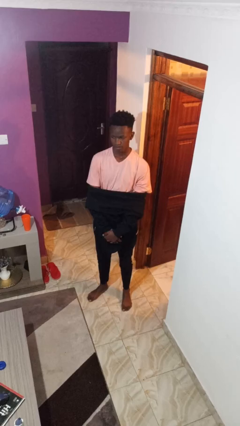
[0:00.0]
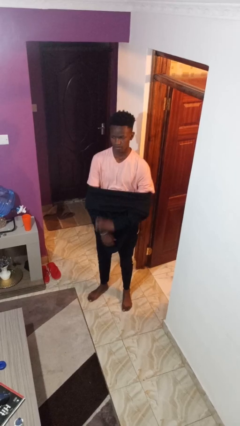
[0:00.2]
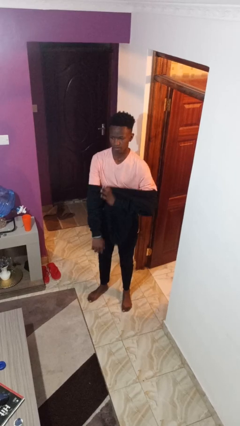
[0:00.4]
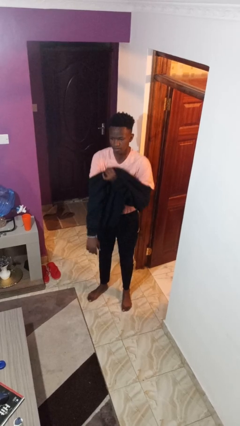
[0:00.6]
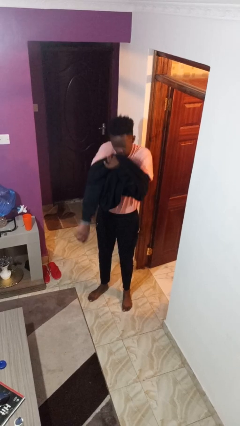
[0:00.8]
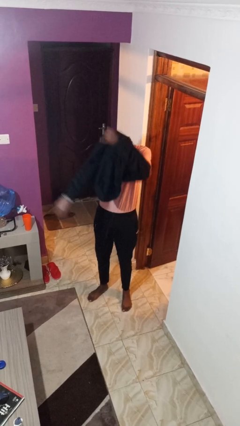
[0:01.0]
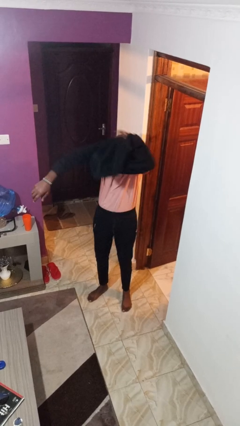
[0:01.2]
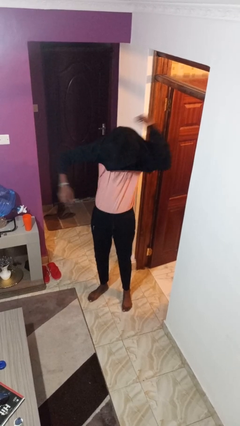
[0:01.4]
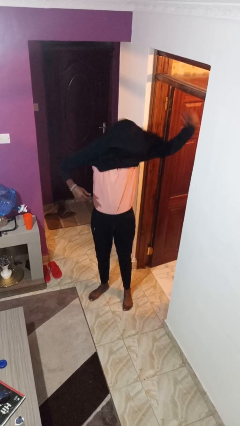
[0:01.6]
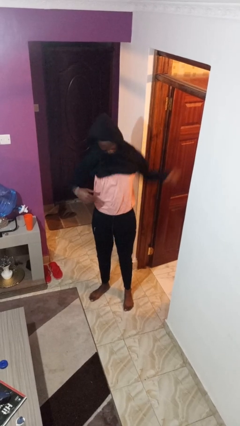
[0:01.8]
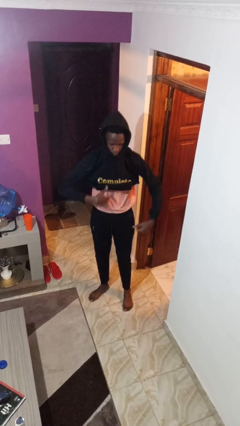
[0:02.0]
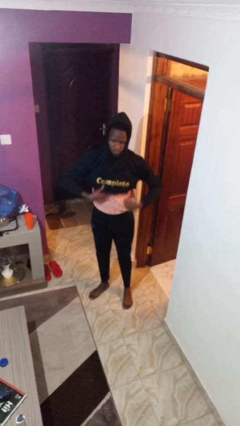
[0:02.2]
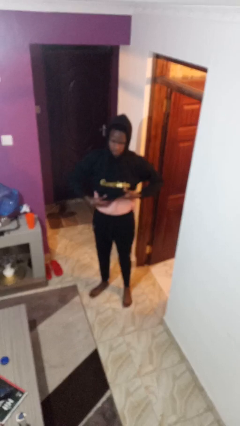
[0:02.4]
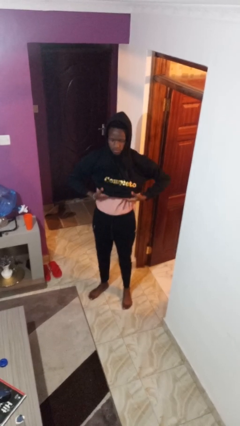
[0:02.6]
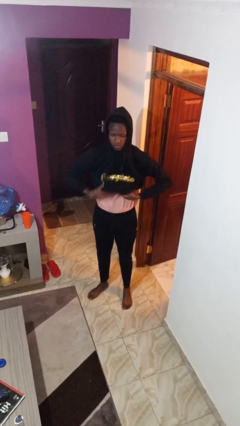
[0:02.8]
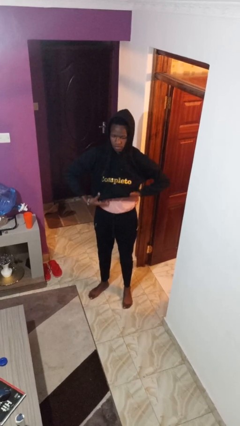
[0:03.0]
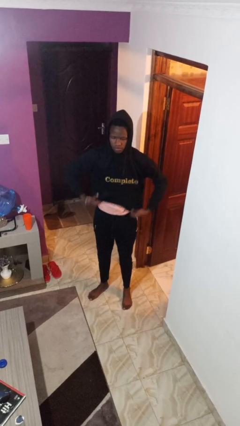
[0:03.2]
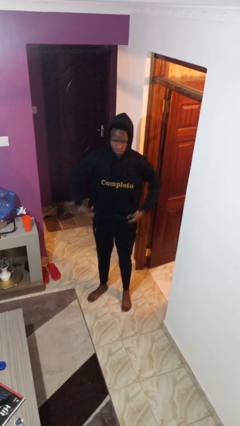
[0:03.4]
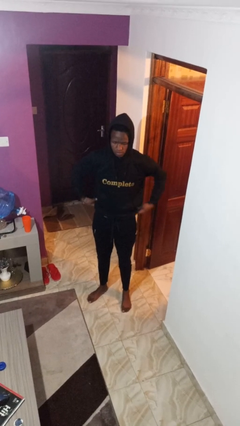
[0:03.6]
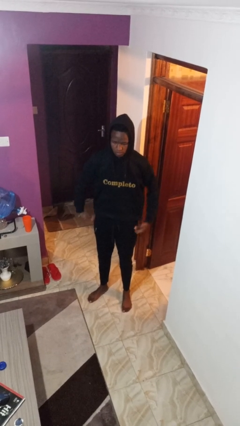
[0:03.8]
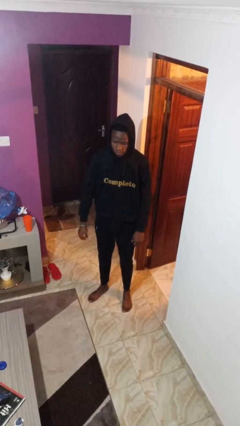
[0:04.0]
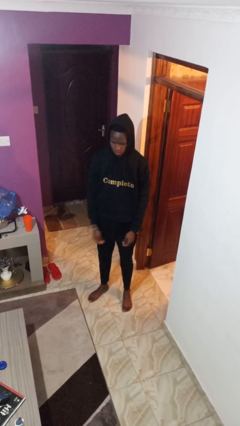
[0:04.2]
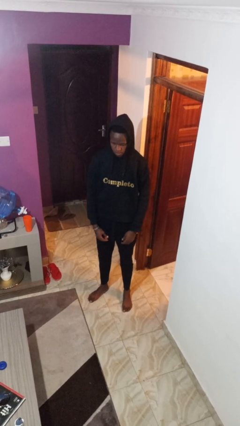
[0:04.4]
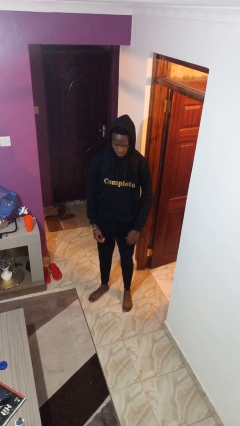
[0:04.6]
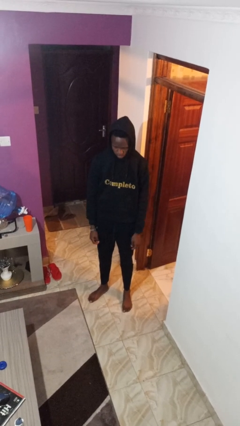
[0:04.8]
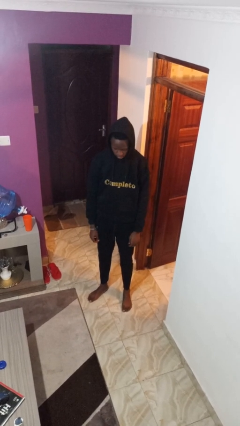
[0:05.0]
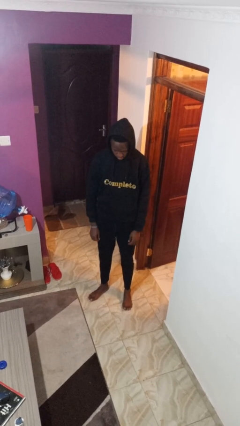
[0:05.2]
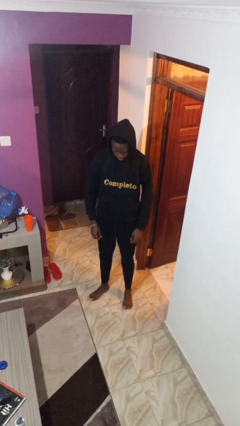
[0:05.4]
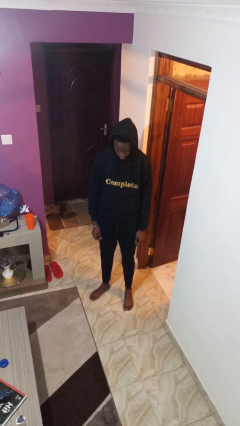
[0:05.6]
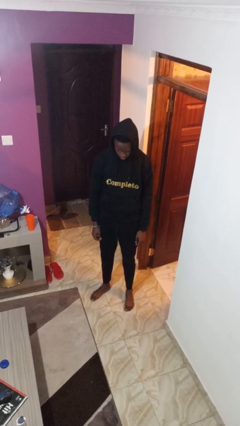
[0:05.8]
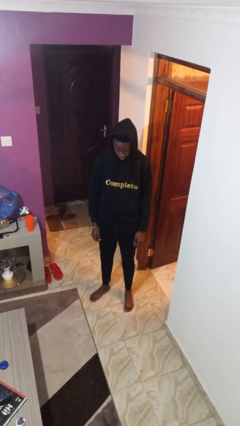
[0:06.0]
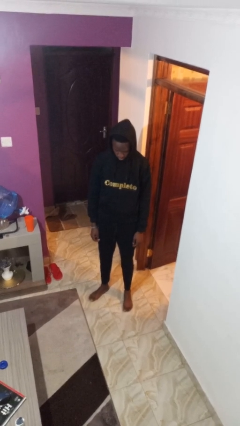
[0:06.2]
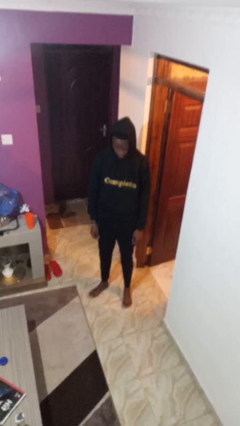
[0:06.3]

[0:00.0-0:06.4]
person puts on hoodie

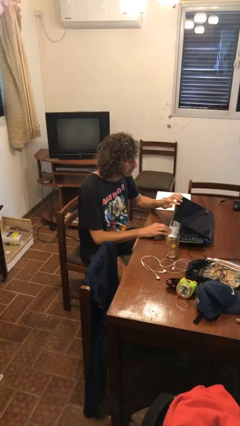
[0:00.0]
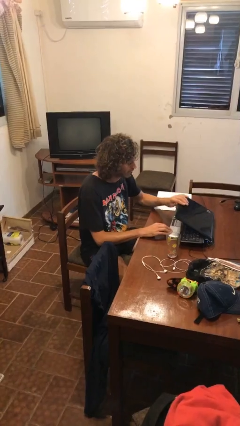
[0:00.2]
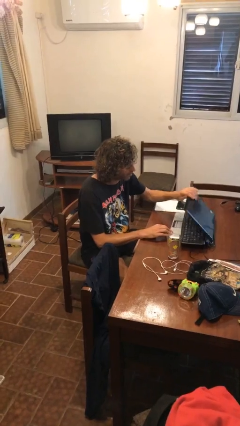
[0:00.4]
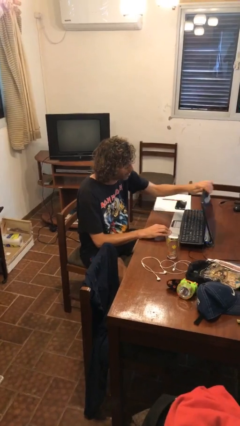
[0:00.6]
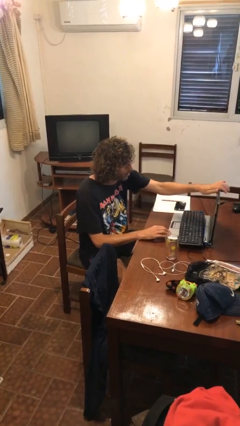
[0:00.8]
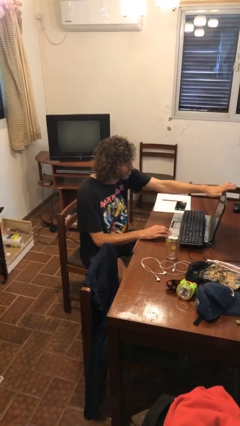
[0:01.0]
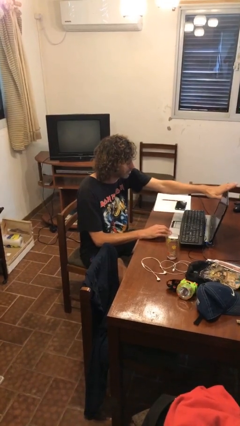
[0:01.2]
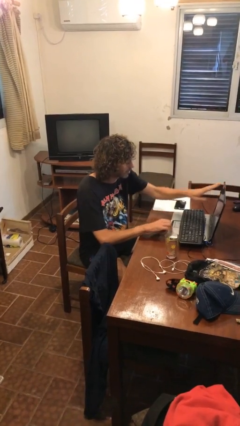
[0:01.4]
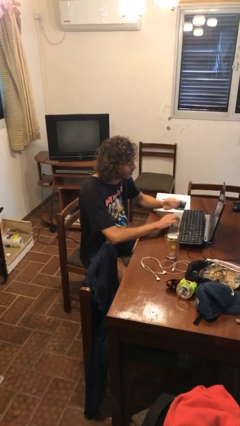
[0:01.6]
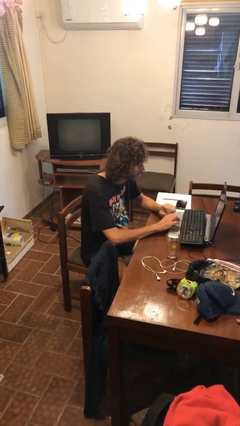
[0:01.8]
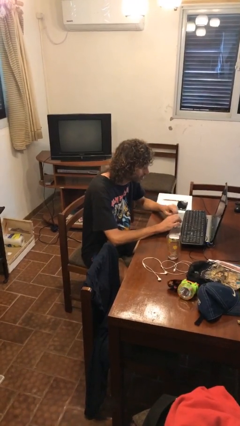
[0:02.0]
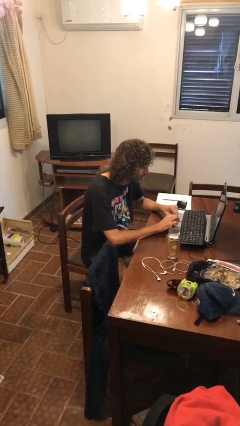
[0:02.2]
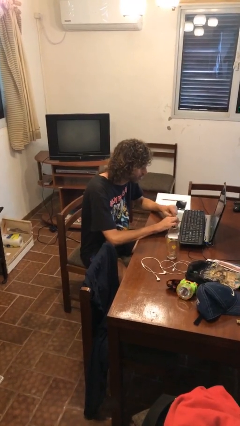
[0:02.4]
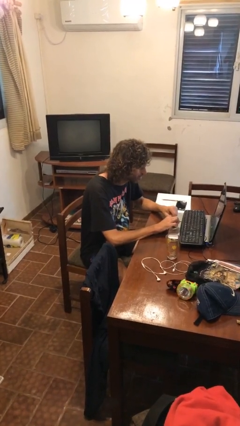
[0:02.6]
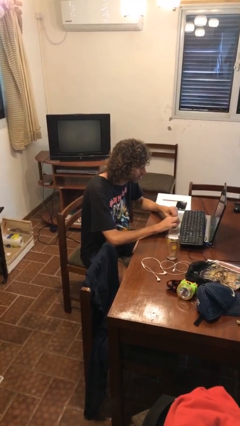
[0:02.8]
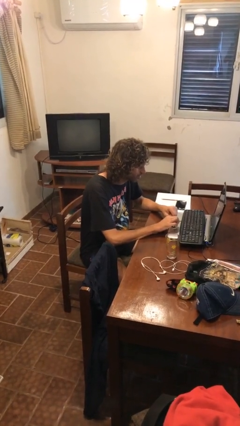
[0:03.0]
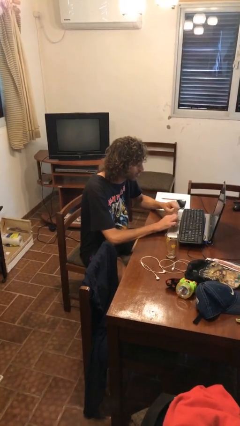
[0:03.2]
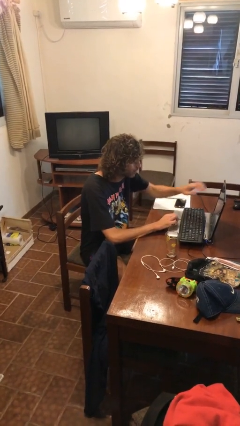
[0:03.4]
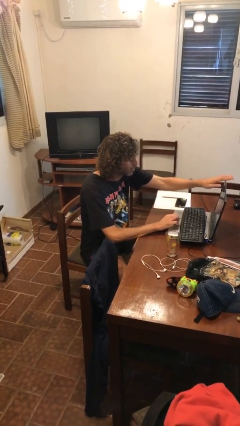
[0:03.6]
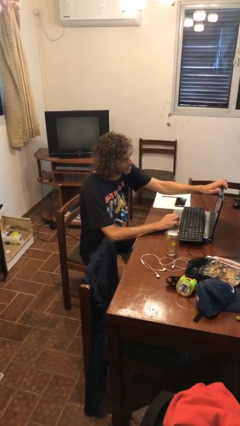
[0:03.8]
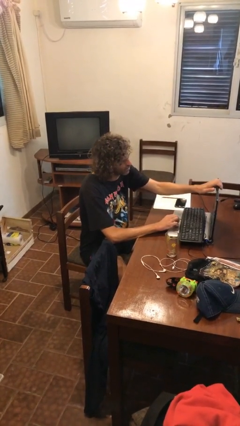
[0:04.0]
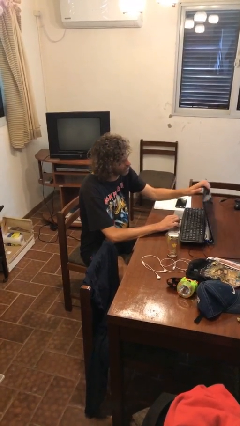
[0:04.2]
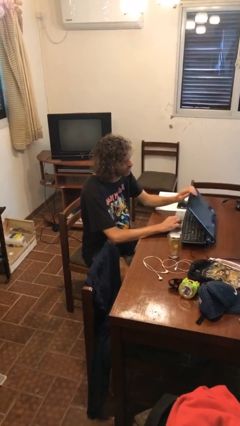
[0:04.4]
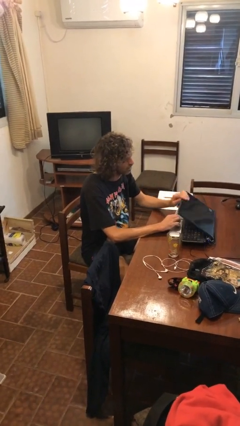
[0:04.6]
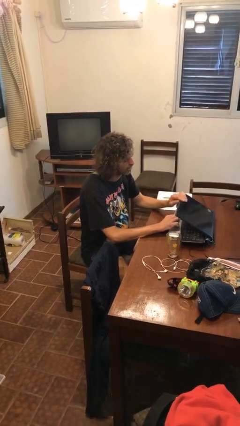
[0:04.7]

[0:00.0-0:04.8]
person interacts with laptop

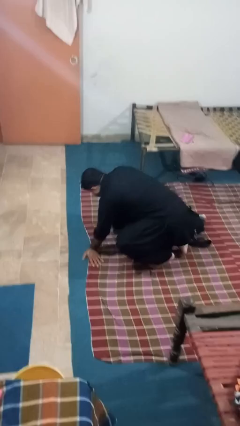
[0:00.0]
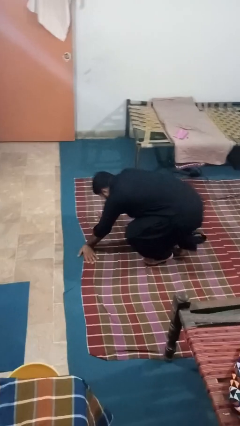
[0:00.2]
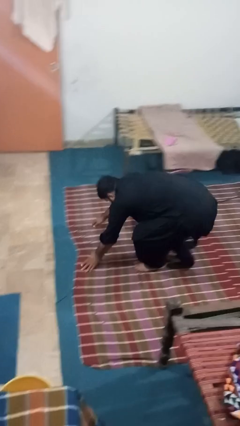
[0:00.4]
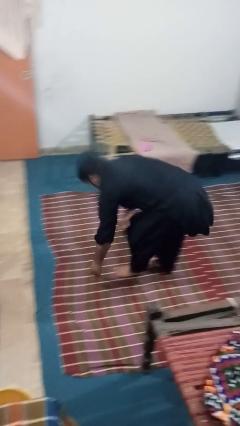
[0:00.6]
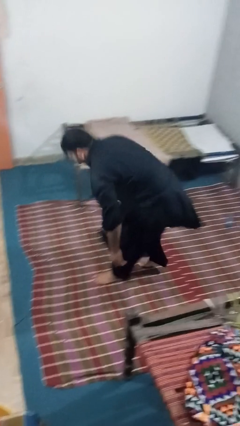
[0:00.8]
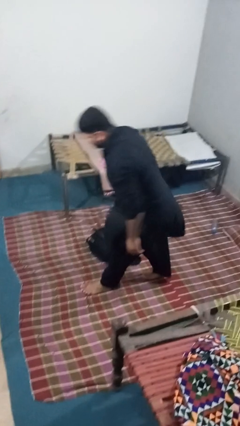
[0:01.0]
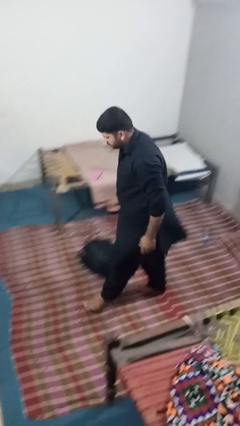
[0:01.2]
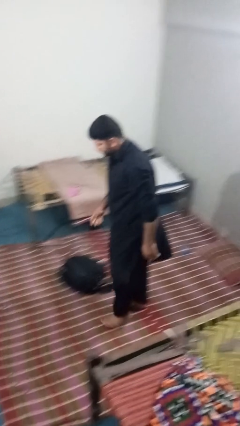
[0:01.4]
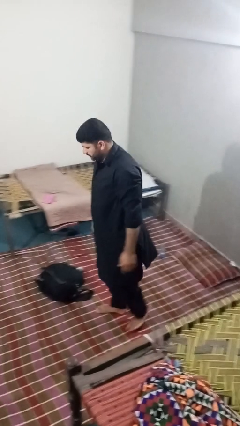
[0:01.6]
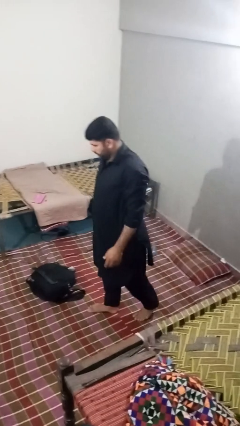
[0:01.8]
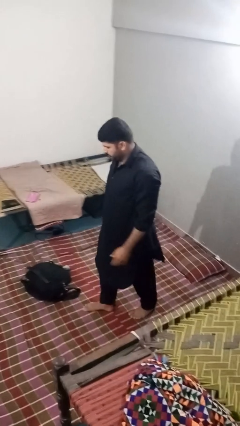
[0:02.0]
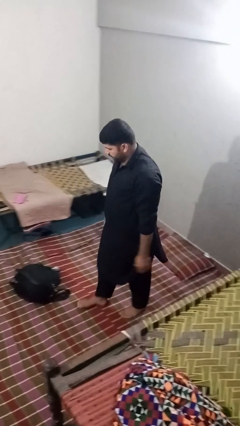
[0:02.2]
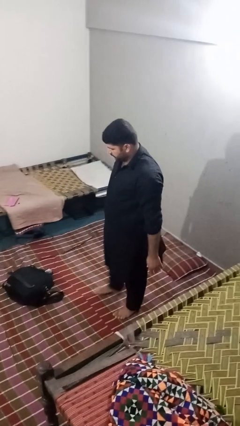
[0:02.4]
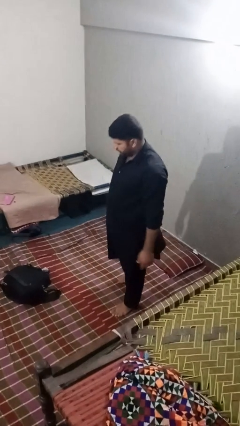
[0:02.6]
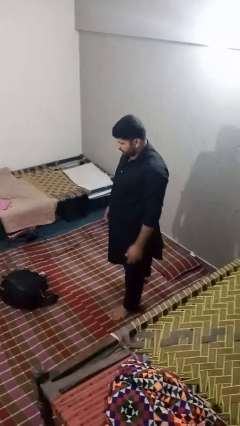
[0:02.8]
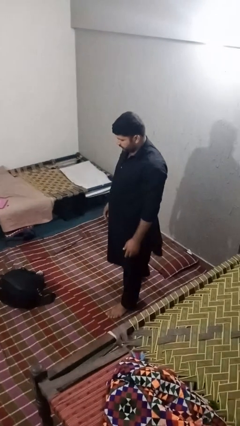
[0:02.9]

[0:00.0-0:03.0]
person stands up from floor

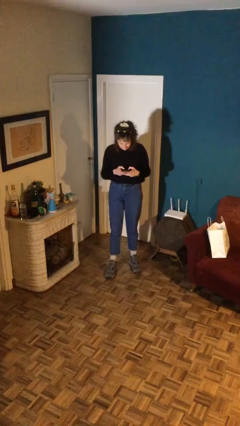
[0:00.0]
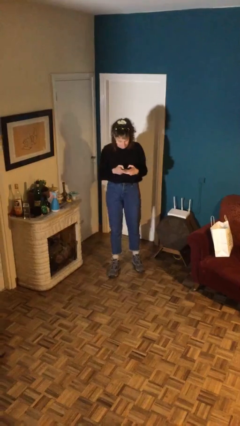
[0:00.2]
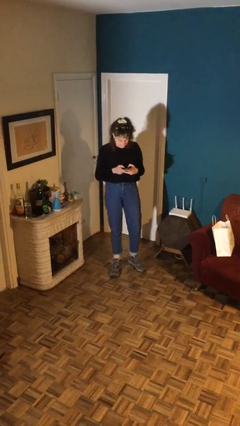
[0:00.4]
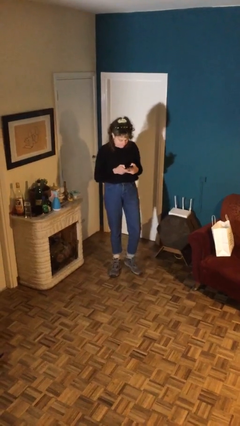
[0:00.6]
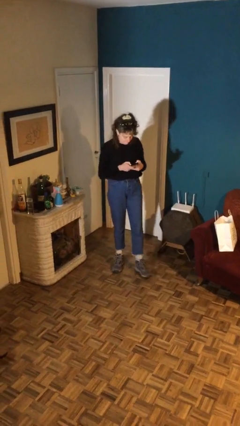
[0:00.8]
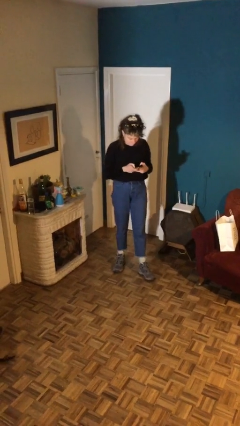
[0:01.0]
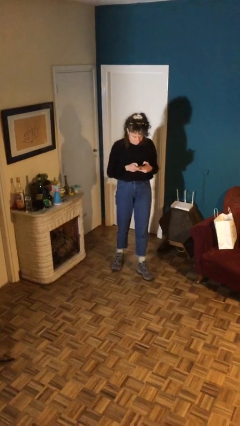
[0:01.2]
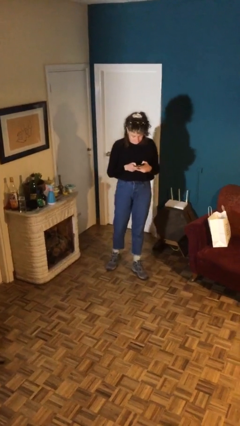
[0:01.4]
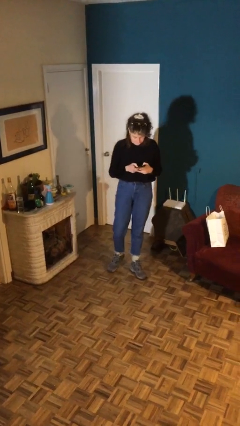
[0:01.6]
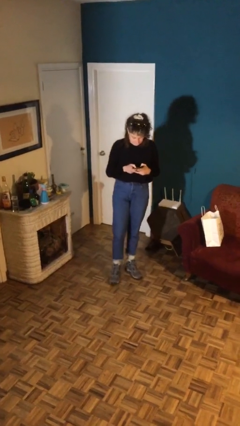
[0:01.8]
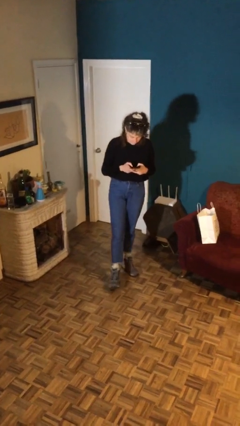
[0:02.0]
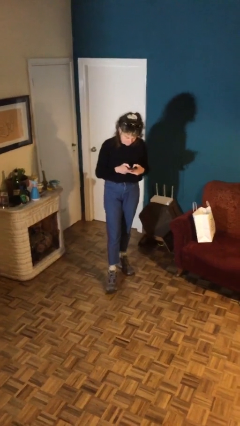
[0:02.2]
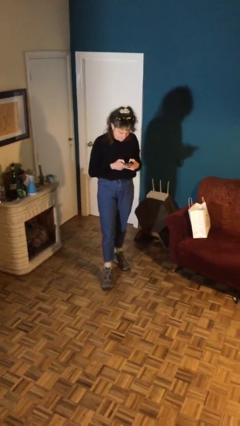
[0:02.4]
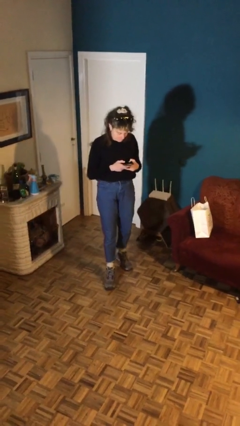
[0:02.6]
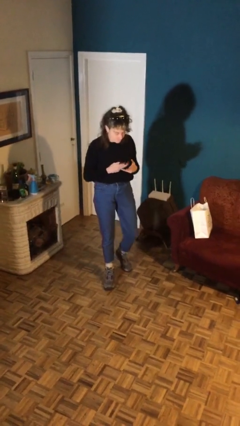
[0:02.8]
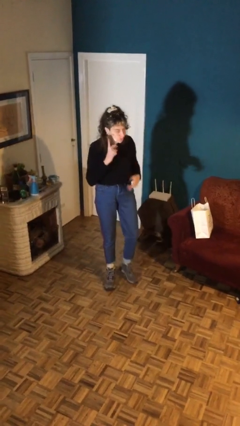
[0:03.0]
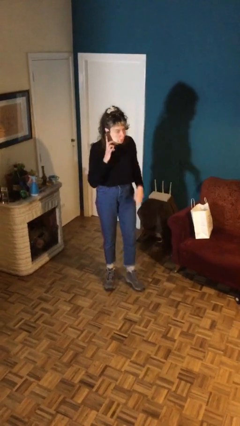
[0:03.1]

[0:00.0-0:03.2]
person texts on phone

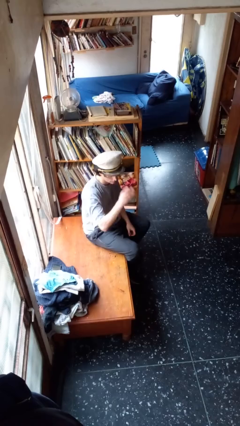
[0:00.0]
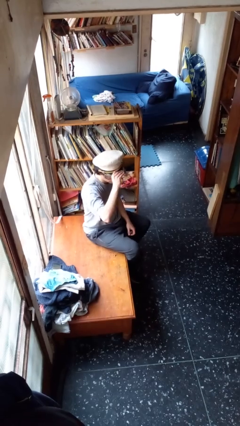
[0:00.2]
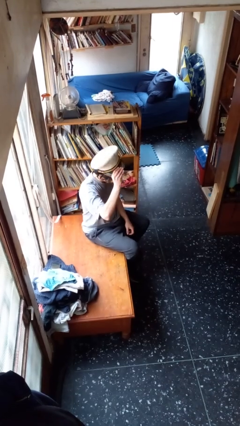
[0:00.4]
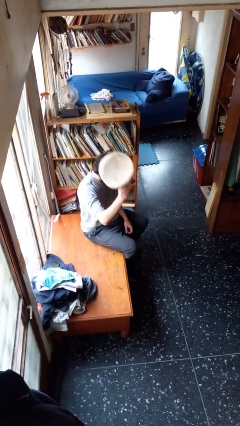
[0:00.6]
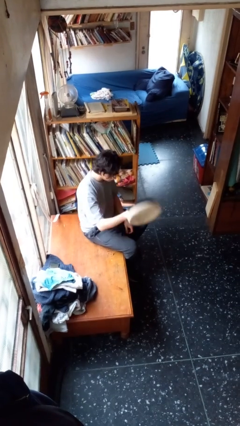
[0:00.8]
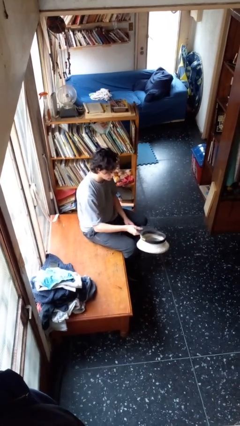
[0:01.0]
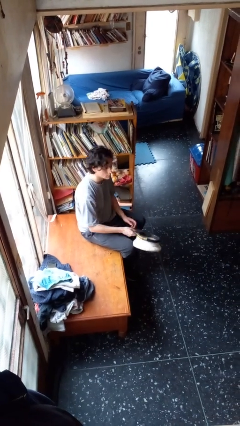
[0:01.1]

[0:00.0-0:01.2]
person takes off hat
